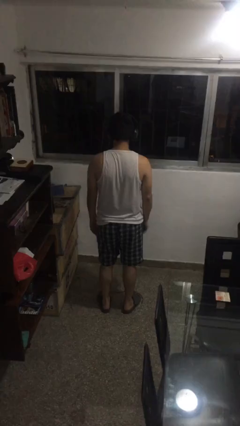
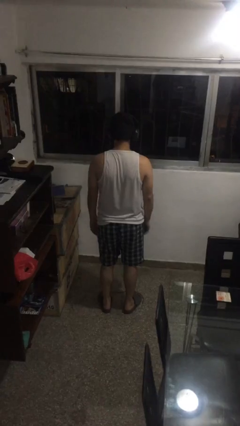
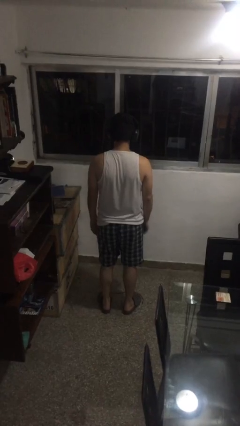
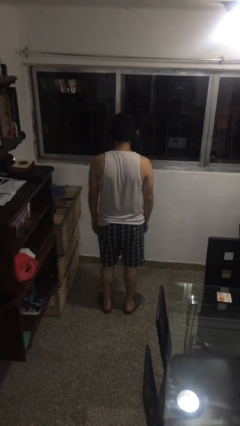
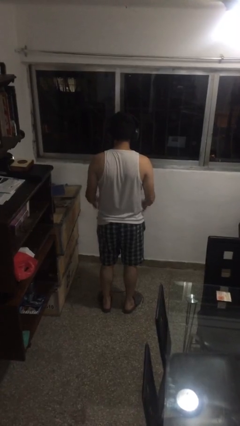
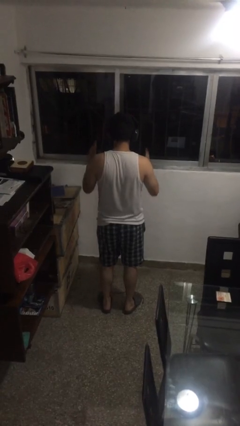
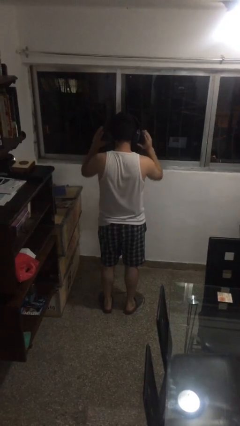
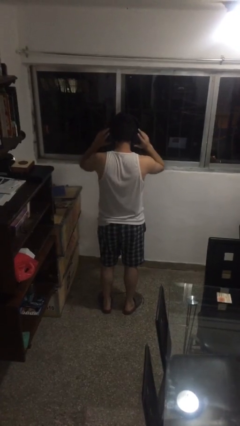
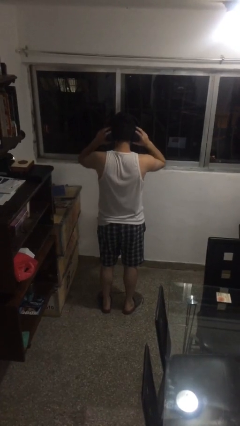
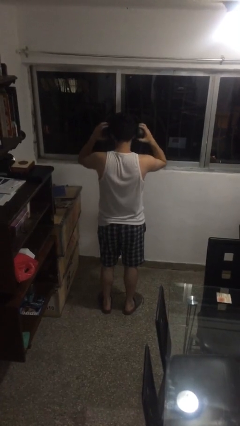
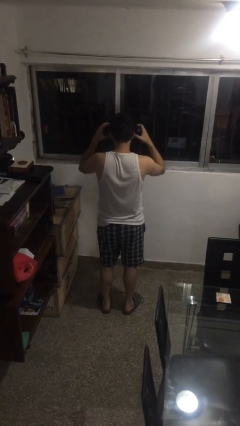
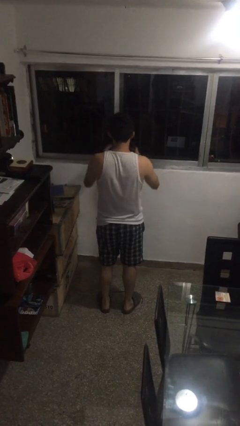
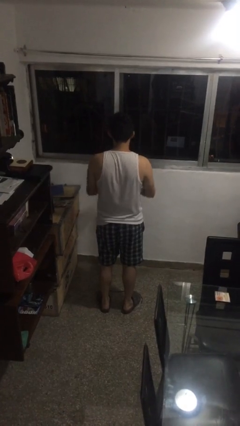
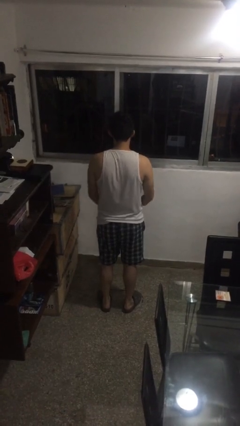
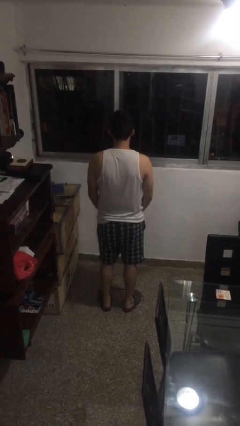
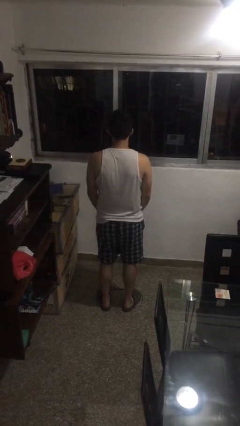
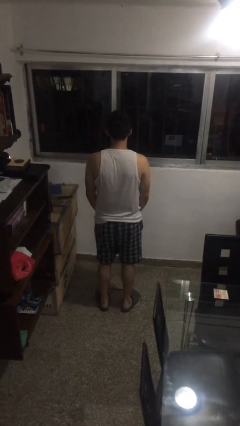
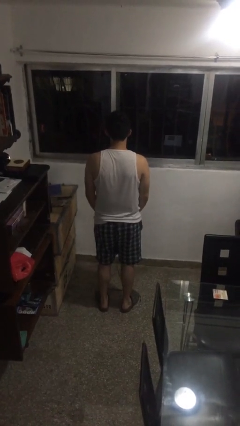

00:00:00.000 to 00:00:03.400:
person takes off headphones

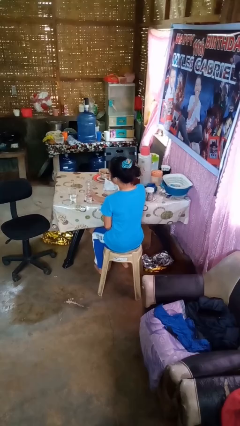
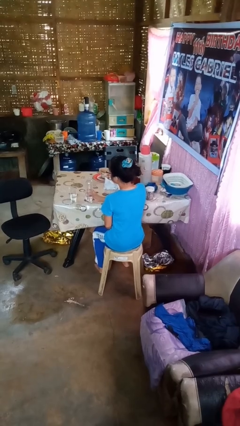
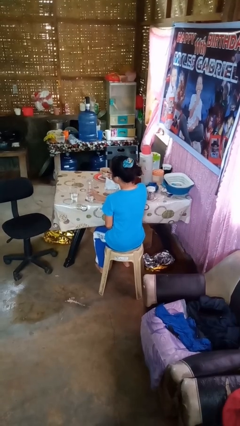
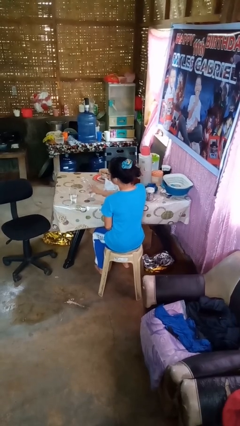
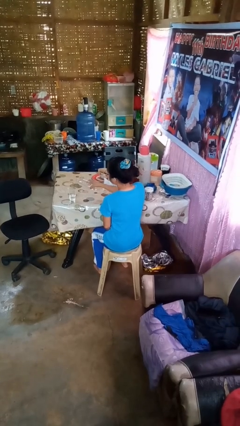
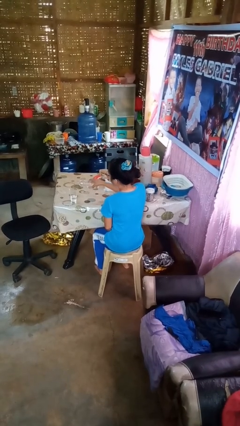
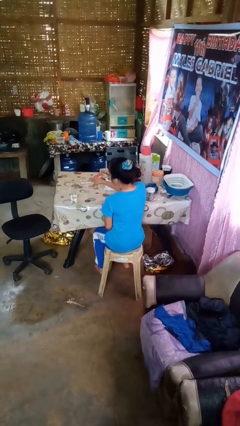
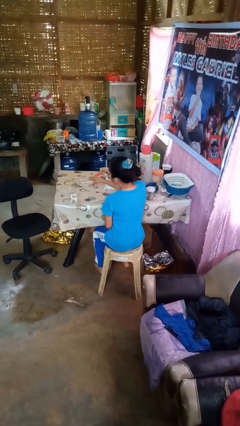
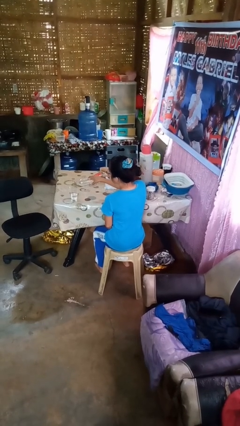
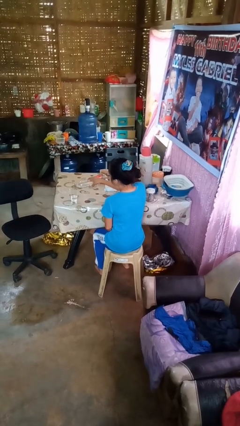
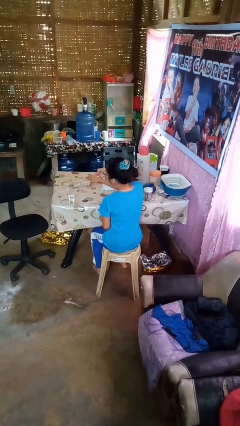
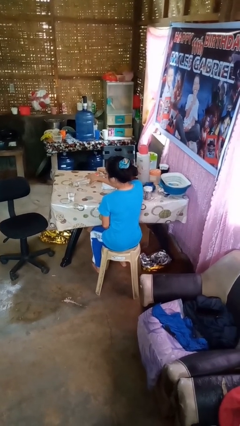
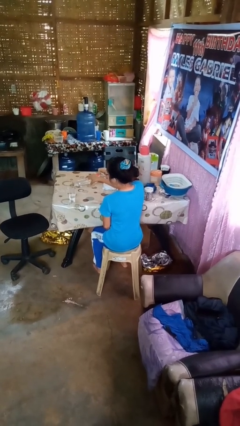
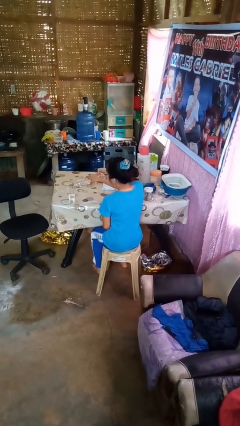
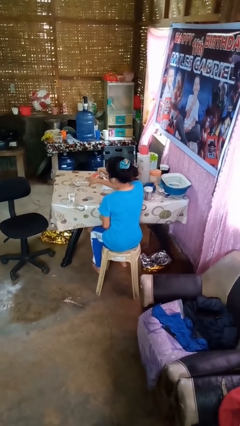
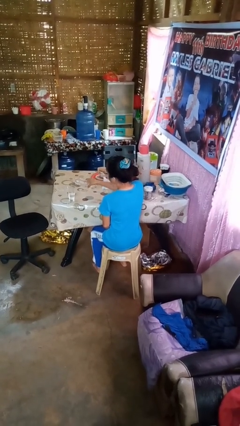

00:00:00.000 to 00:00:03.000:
person pours liquid into cup

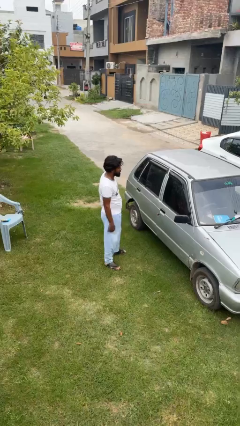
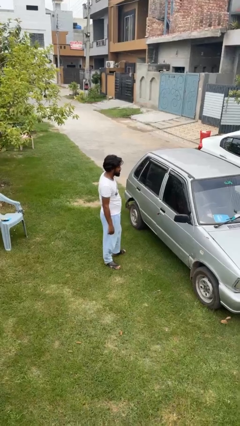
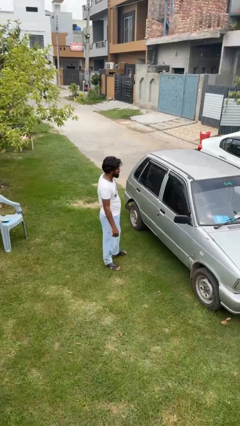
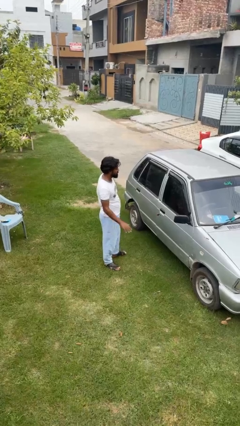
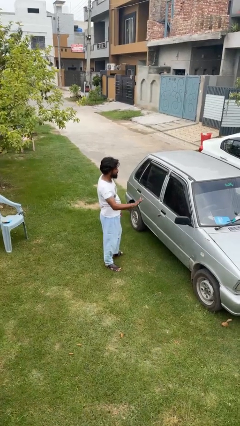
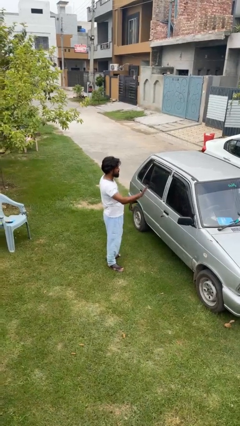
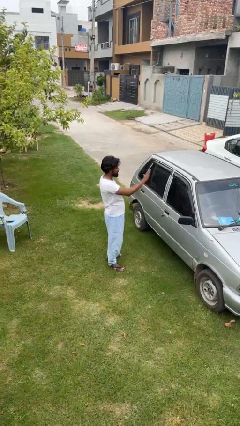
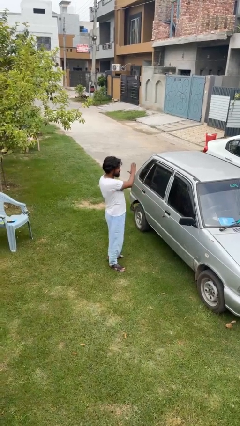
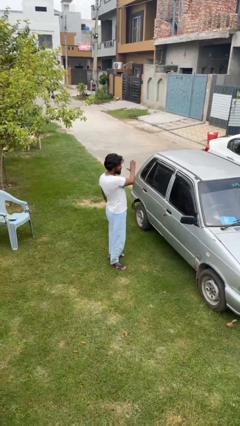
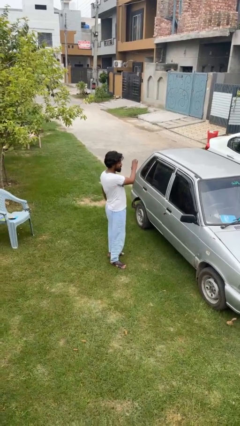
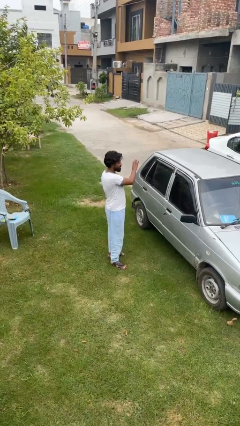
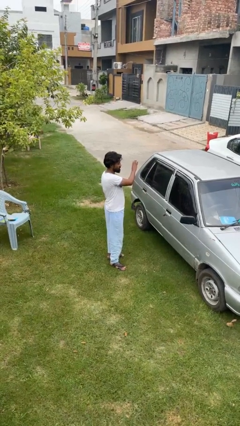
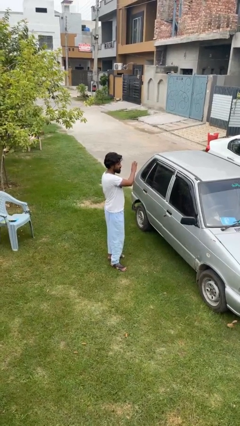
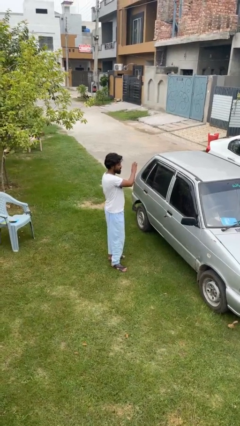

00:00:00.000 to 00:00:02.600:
person gestures swipe left

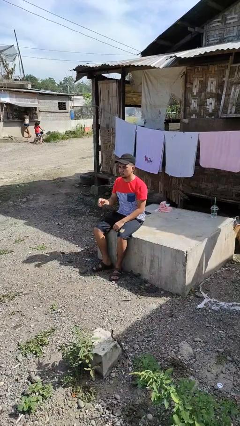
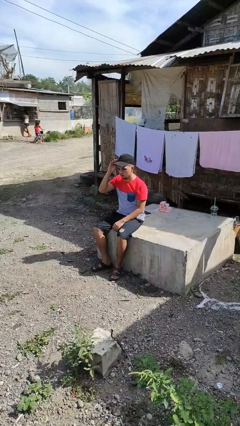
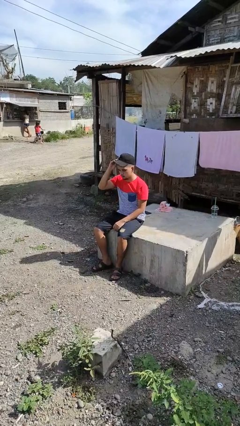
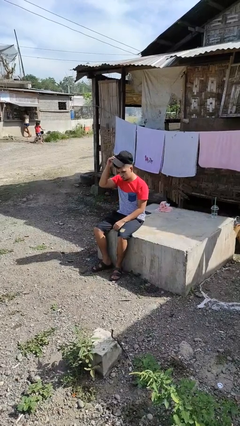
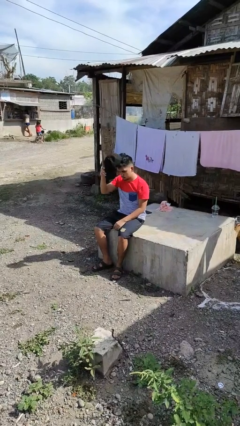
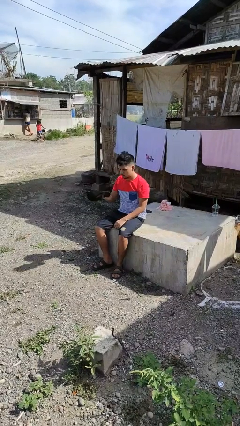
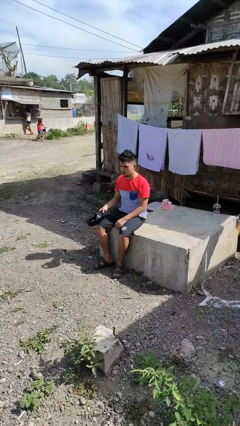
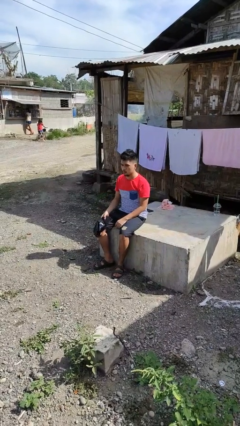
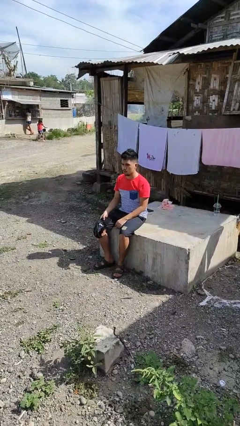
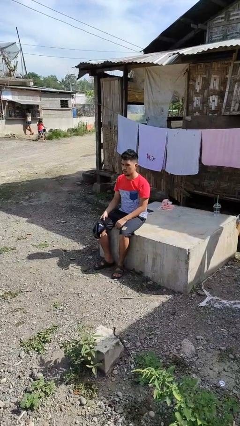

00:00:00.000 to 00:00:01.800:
person takes off hat

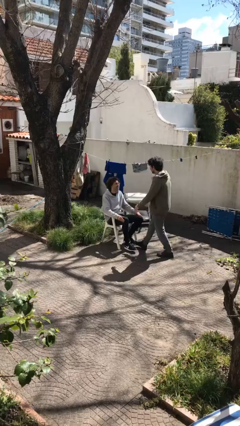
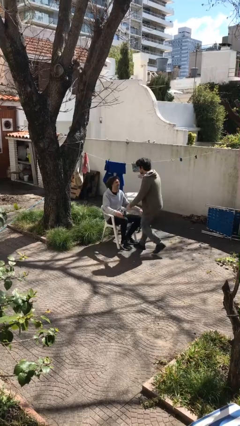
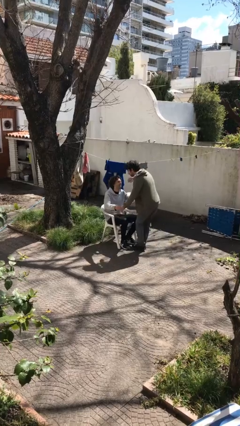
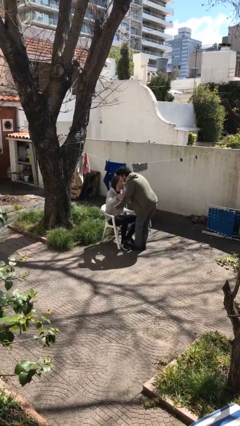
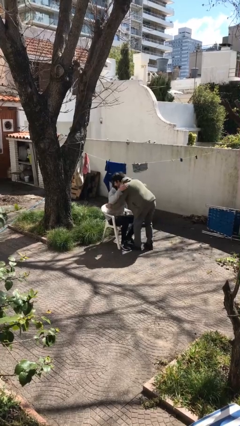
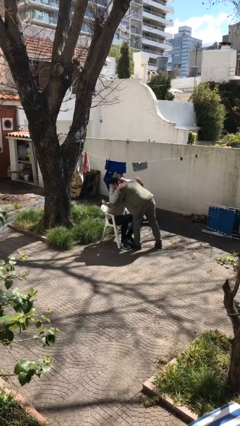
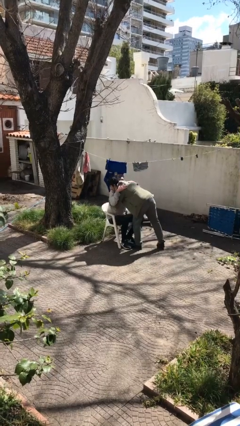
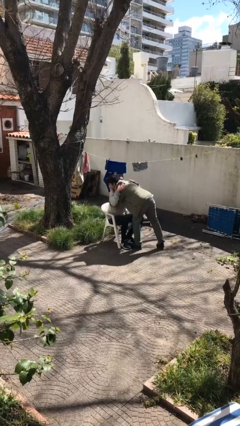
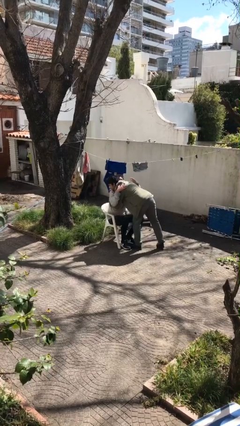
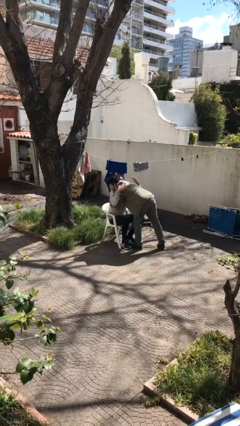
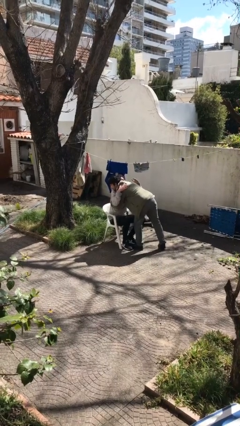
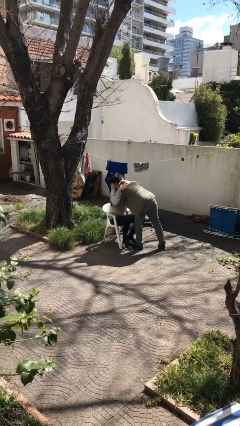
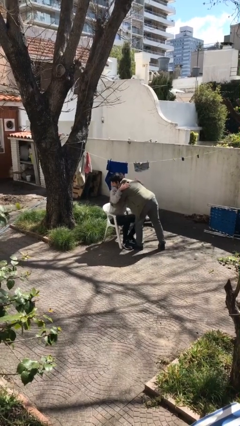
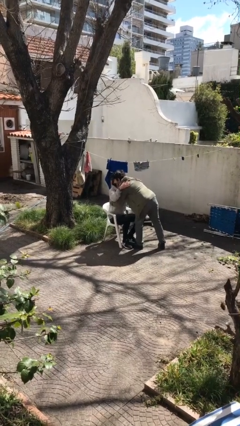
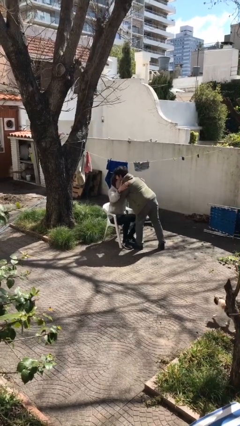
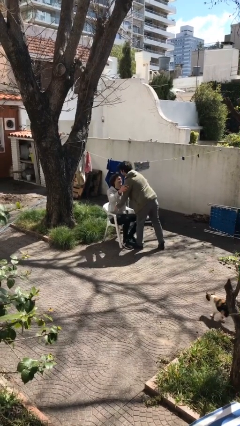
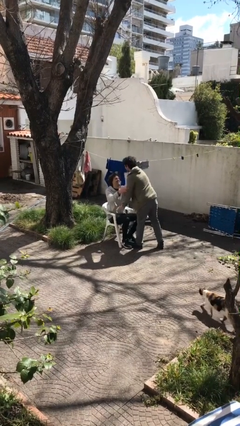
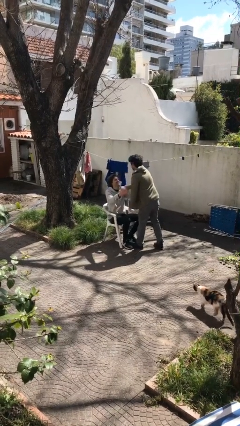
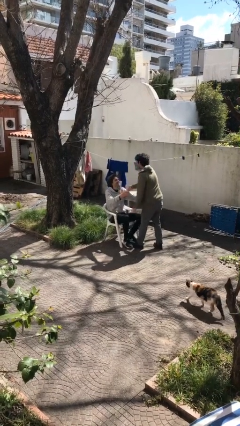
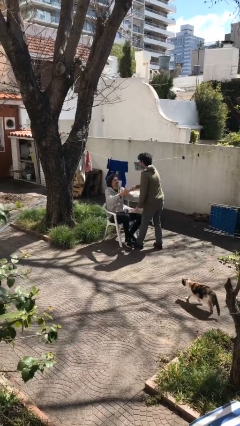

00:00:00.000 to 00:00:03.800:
person embraces person

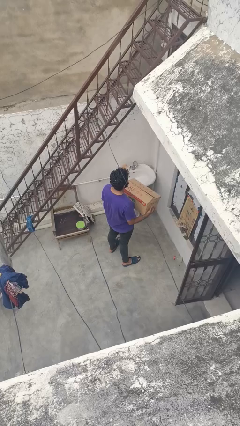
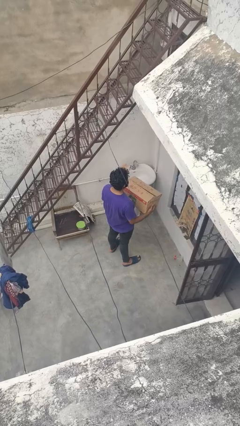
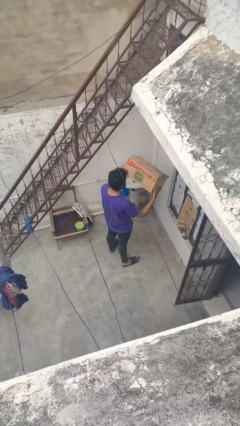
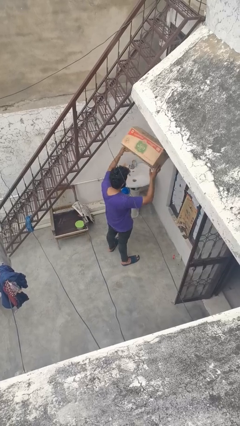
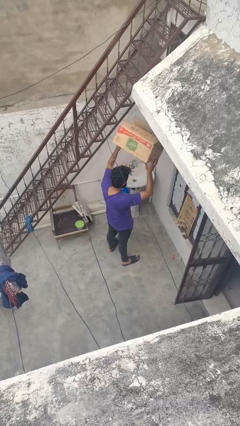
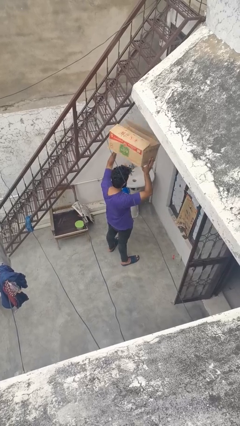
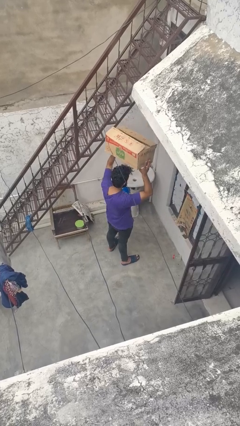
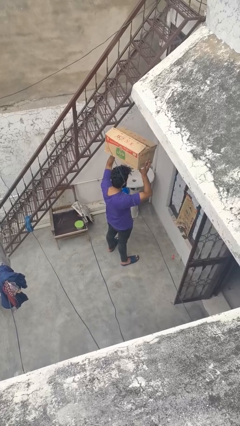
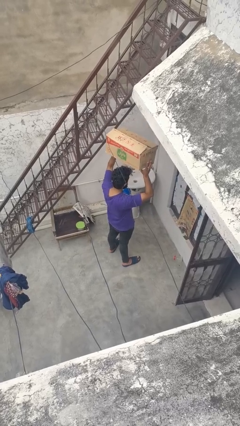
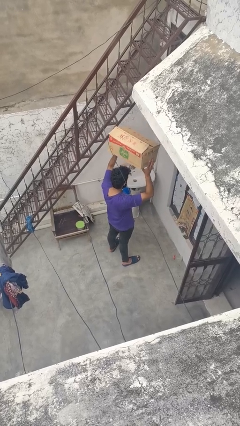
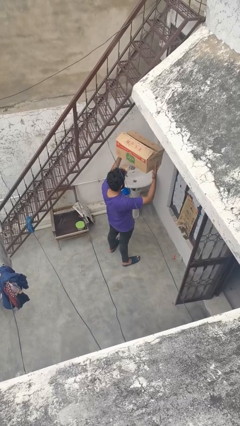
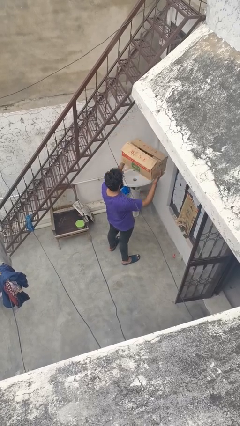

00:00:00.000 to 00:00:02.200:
person holds object above head

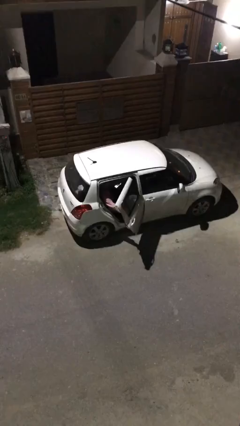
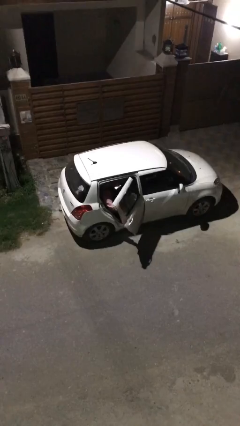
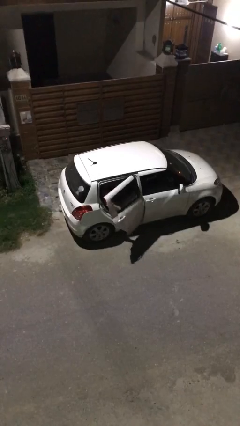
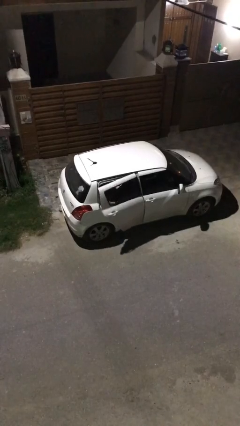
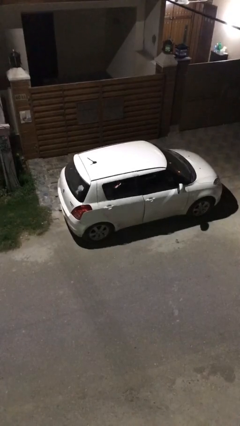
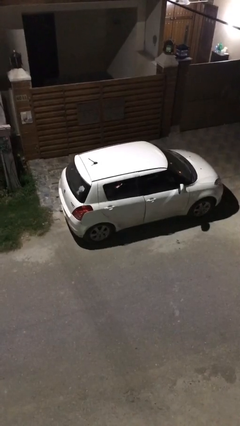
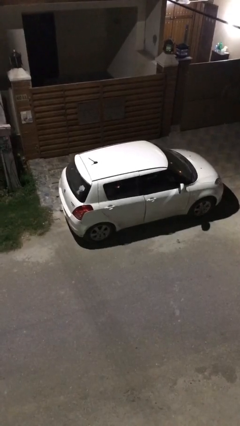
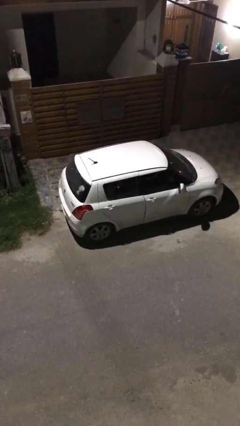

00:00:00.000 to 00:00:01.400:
person closes car door
